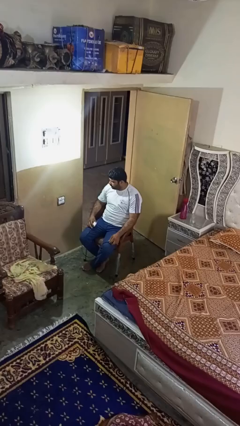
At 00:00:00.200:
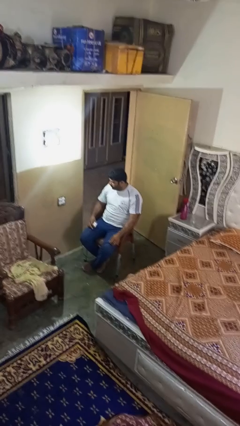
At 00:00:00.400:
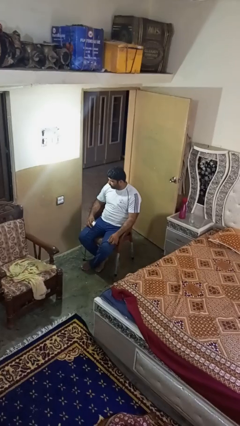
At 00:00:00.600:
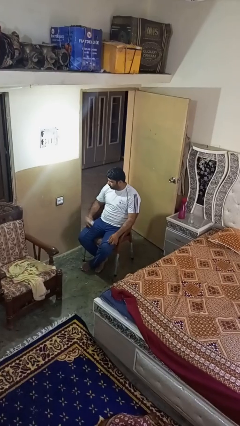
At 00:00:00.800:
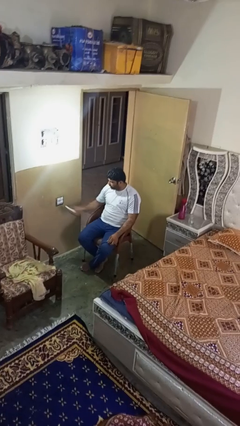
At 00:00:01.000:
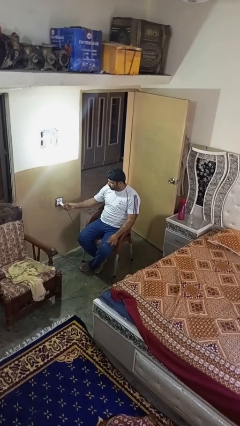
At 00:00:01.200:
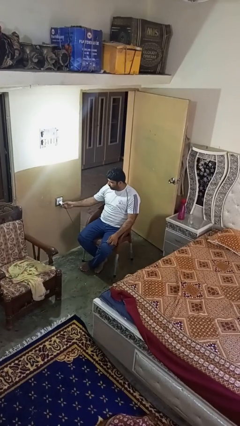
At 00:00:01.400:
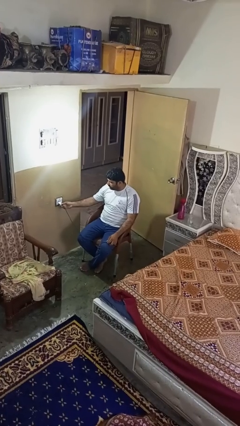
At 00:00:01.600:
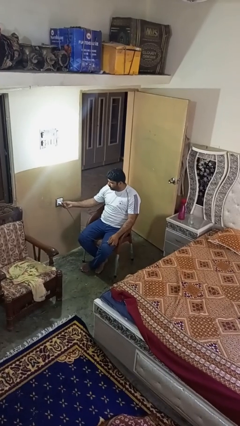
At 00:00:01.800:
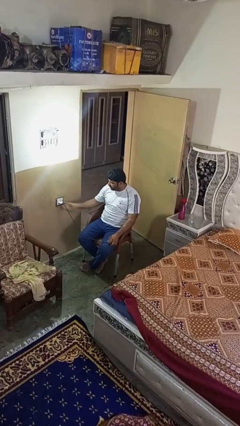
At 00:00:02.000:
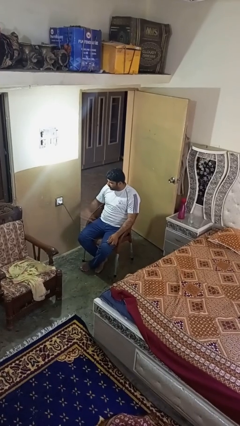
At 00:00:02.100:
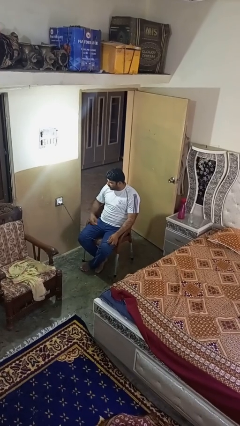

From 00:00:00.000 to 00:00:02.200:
person plugs into electrical socket

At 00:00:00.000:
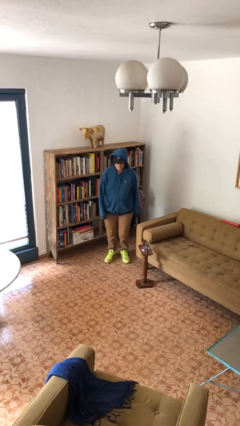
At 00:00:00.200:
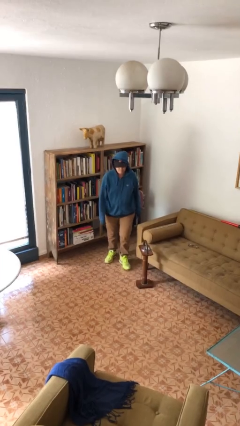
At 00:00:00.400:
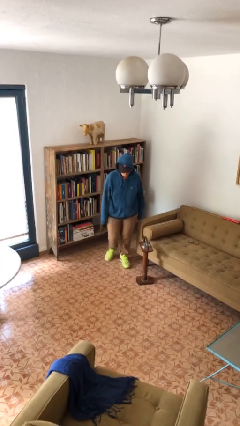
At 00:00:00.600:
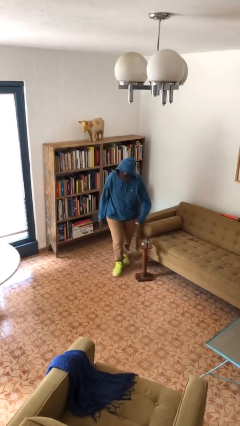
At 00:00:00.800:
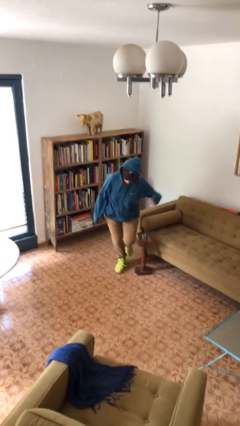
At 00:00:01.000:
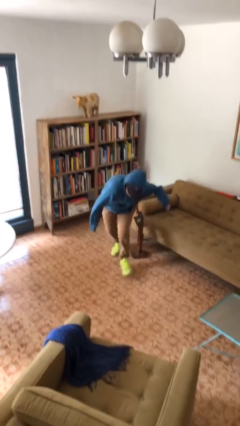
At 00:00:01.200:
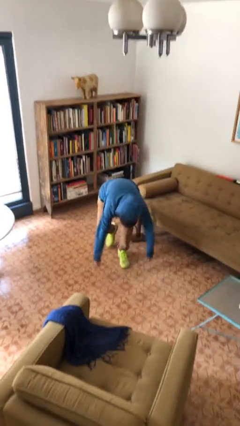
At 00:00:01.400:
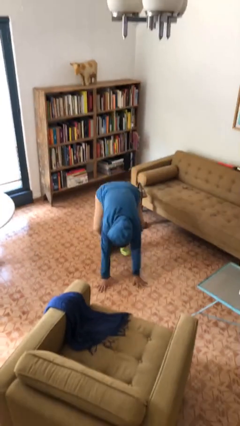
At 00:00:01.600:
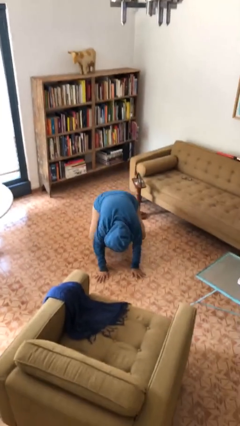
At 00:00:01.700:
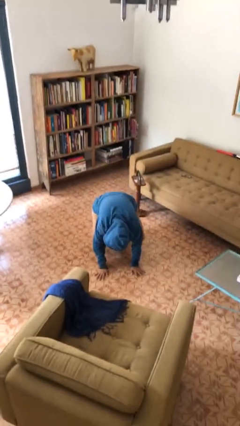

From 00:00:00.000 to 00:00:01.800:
person trips on object on floor

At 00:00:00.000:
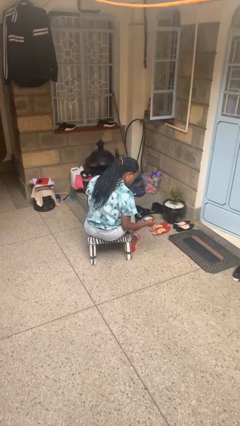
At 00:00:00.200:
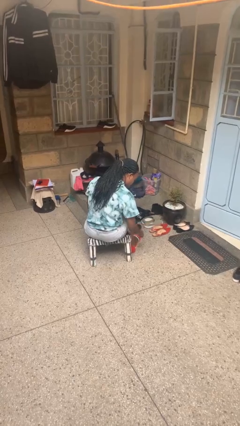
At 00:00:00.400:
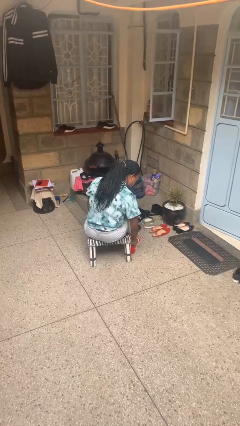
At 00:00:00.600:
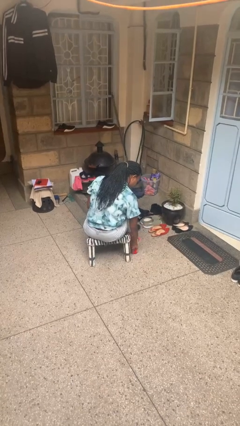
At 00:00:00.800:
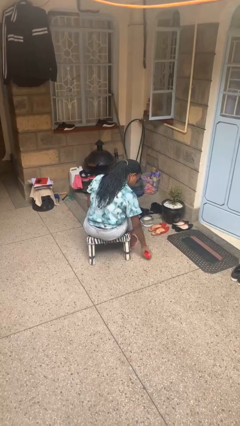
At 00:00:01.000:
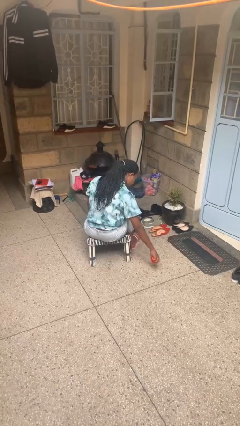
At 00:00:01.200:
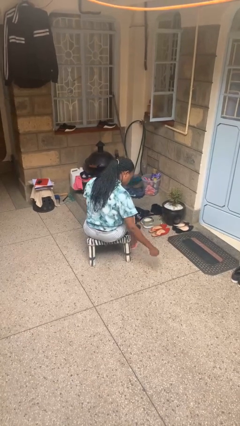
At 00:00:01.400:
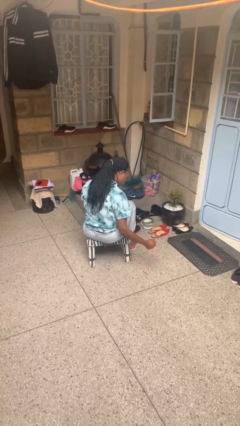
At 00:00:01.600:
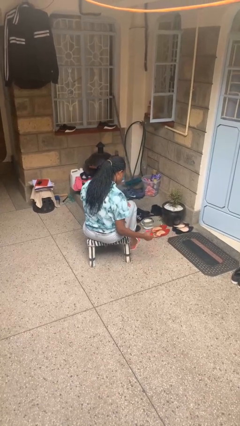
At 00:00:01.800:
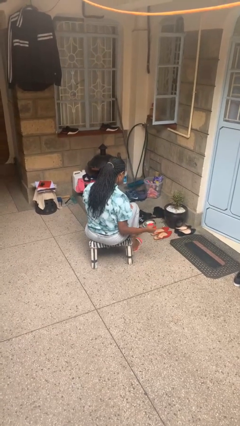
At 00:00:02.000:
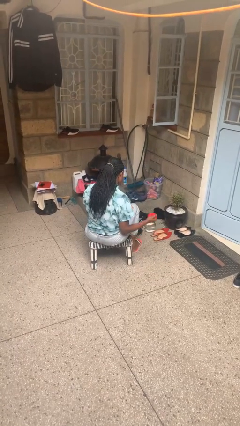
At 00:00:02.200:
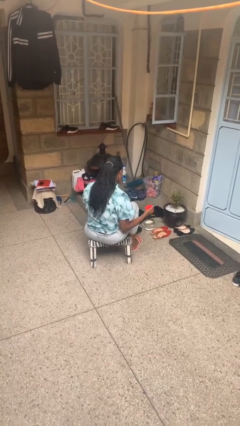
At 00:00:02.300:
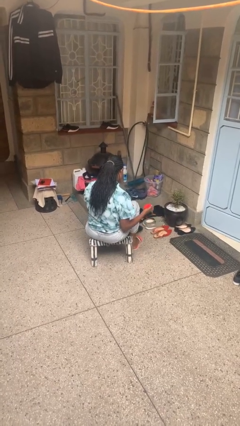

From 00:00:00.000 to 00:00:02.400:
person picks up object from floor

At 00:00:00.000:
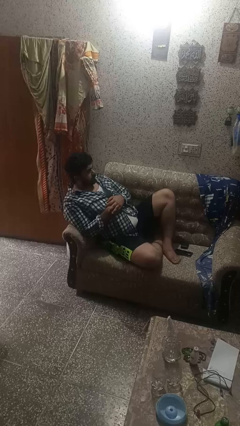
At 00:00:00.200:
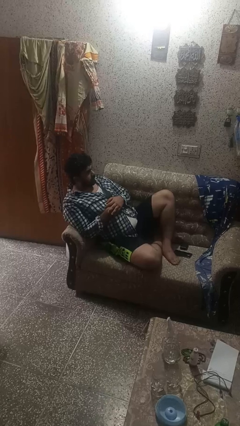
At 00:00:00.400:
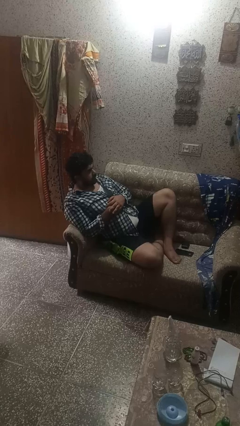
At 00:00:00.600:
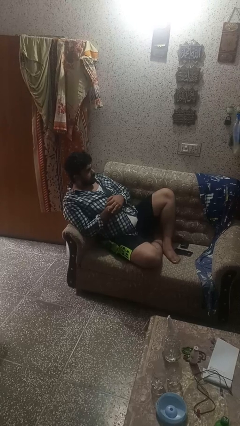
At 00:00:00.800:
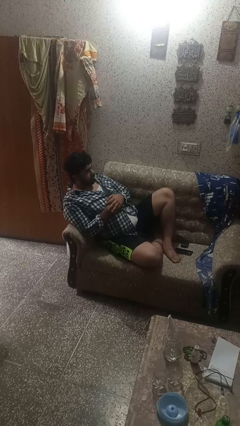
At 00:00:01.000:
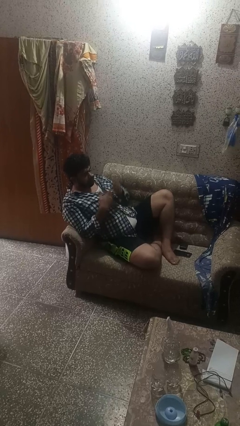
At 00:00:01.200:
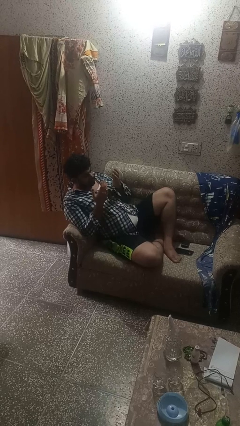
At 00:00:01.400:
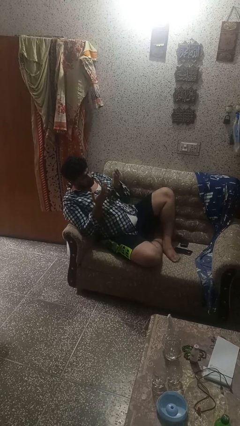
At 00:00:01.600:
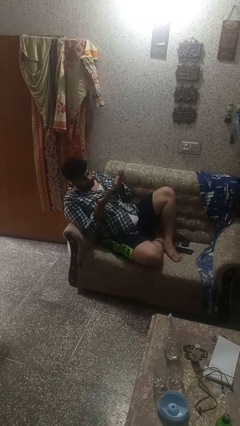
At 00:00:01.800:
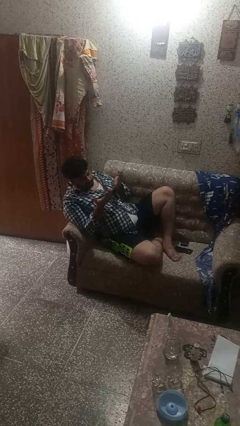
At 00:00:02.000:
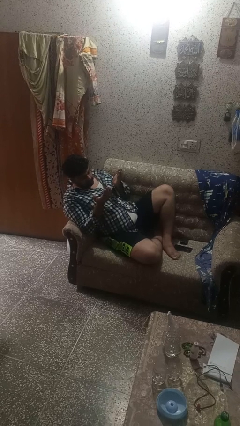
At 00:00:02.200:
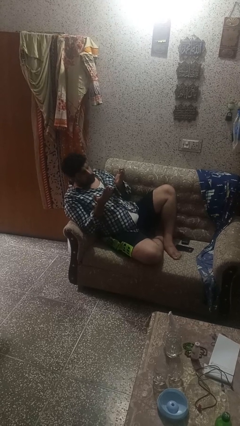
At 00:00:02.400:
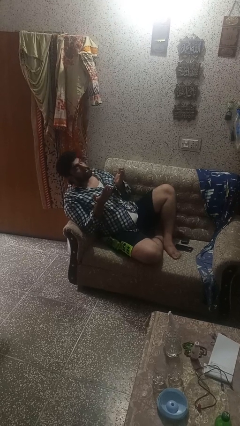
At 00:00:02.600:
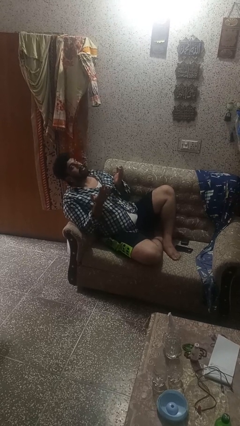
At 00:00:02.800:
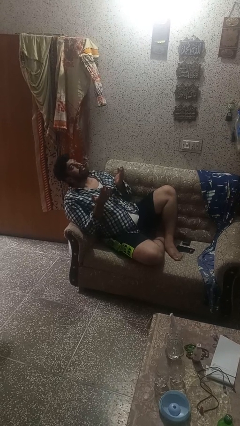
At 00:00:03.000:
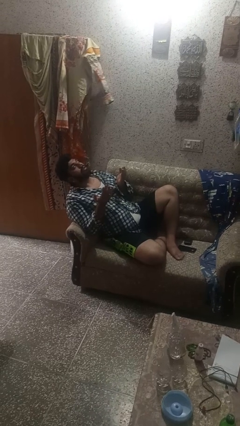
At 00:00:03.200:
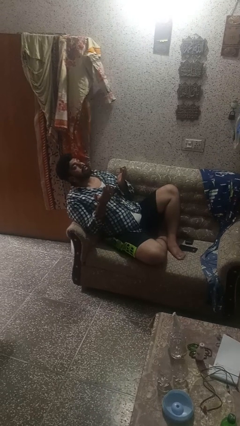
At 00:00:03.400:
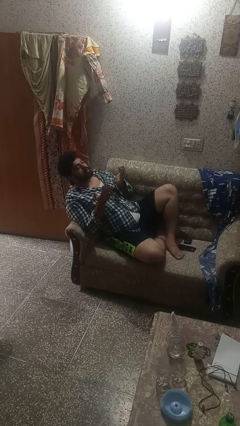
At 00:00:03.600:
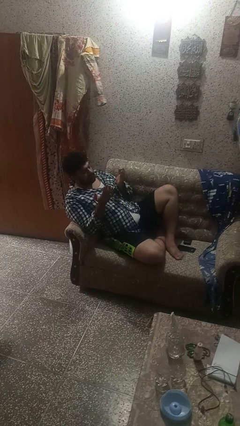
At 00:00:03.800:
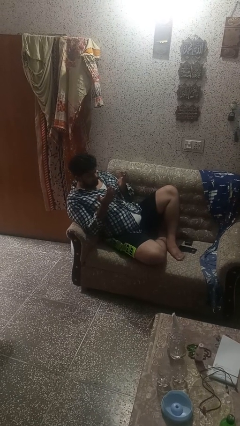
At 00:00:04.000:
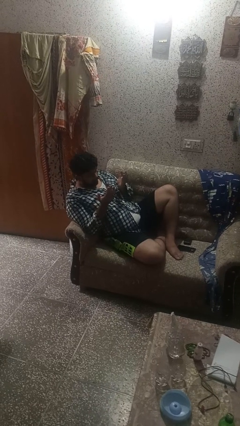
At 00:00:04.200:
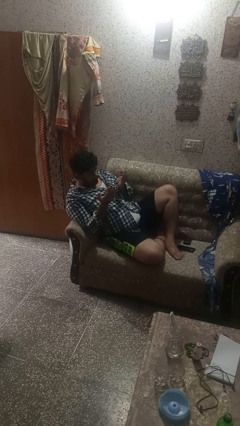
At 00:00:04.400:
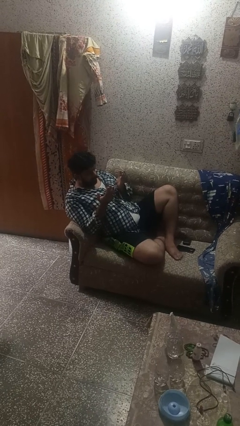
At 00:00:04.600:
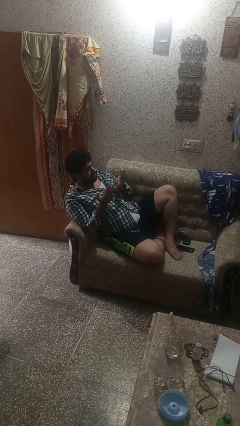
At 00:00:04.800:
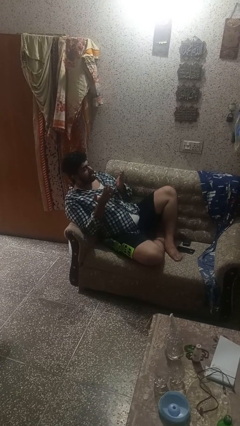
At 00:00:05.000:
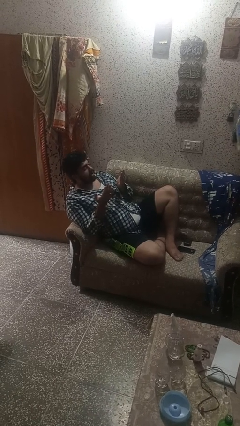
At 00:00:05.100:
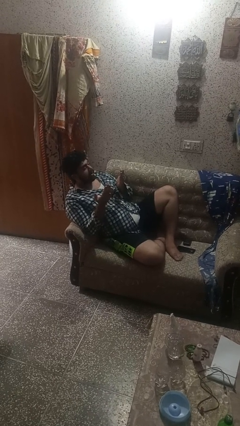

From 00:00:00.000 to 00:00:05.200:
person prays

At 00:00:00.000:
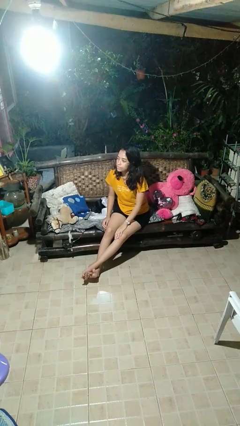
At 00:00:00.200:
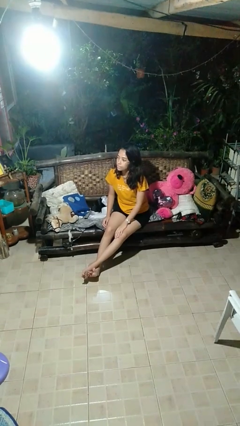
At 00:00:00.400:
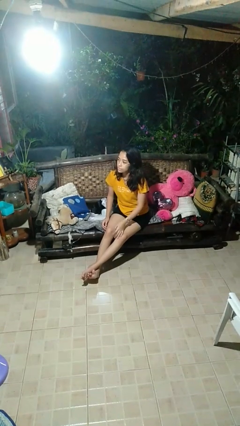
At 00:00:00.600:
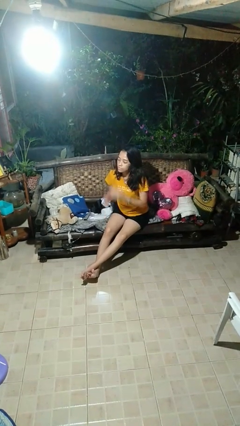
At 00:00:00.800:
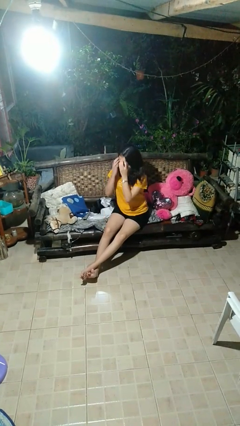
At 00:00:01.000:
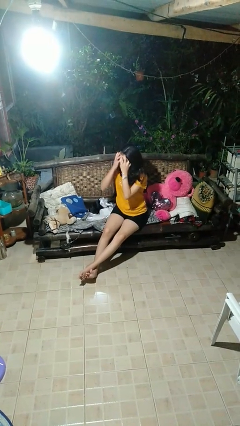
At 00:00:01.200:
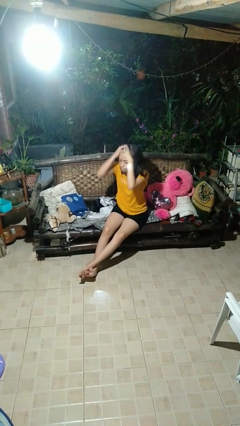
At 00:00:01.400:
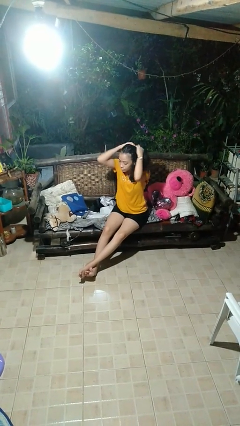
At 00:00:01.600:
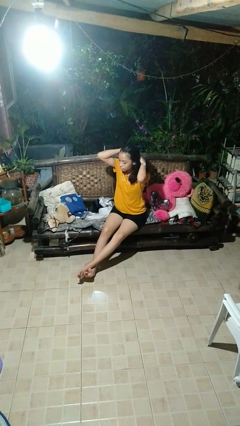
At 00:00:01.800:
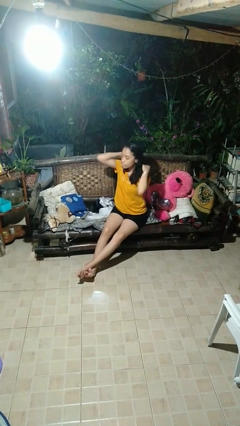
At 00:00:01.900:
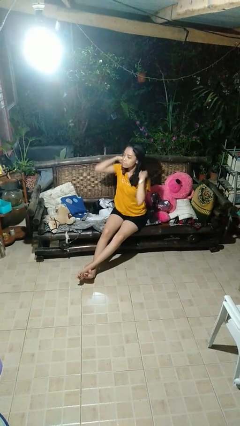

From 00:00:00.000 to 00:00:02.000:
person strokes hair

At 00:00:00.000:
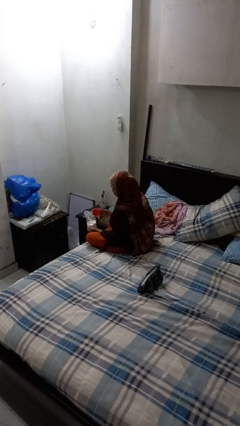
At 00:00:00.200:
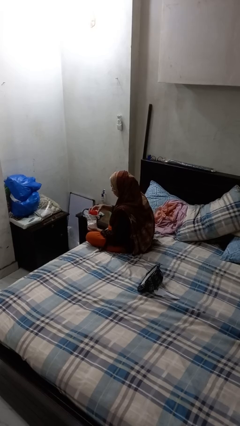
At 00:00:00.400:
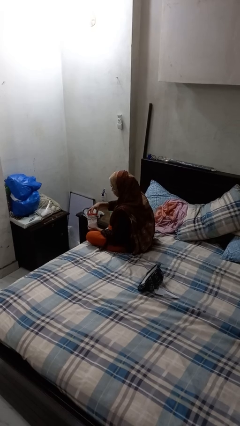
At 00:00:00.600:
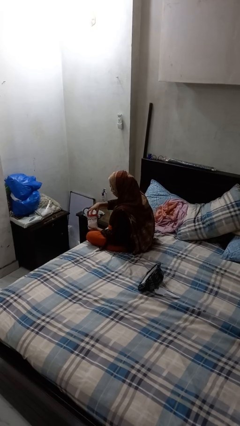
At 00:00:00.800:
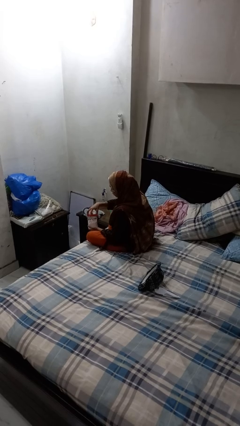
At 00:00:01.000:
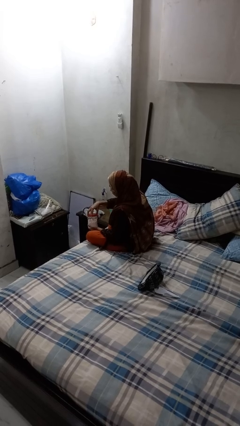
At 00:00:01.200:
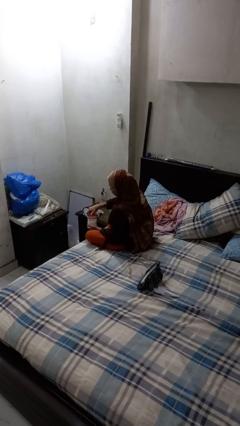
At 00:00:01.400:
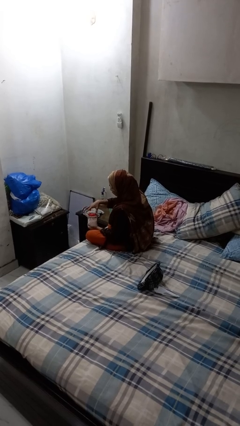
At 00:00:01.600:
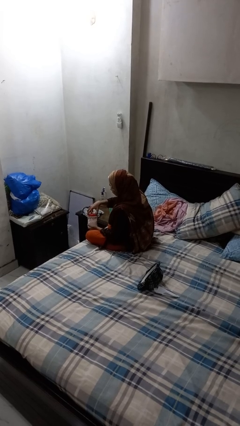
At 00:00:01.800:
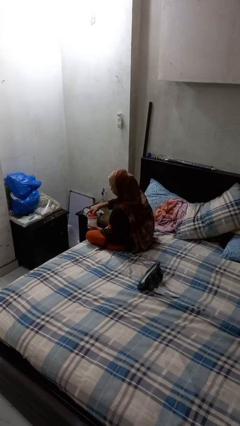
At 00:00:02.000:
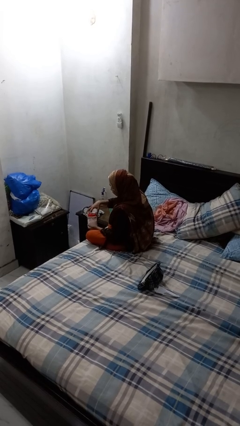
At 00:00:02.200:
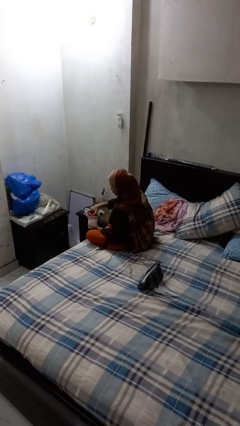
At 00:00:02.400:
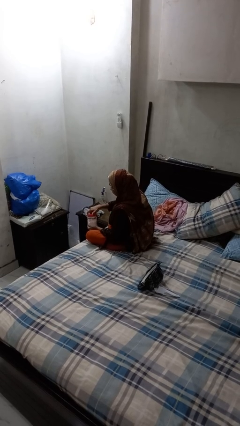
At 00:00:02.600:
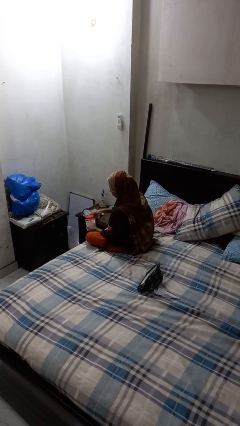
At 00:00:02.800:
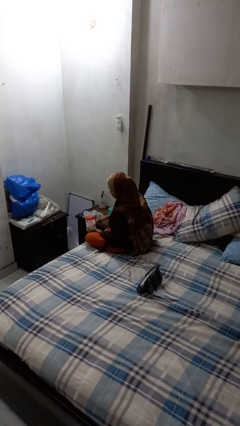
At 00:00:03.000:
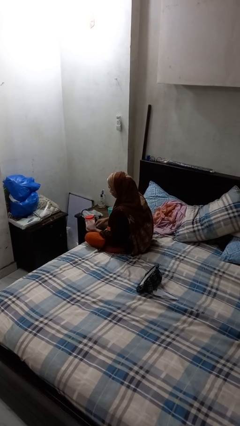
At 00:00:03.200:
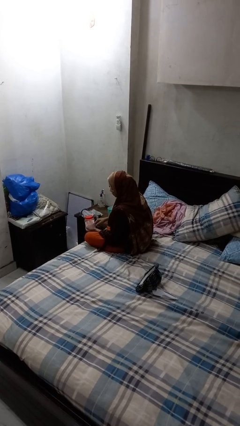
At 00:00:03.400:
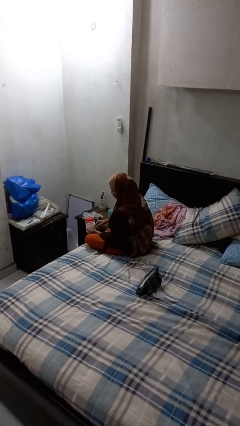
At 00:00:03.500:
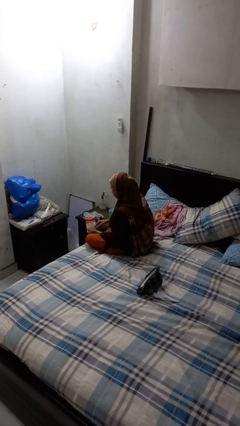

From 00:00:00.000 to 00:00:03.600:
person closes jar
